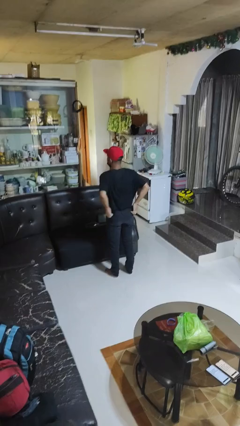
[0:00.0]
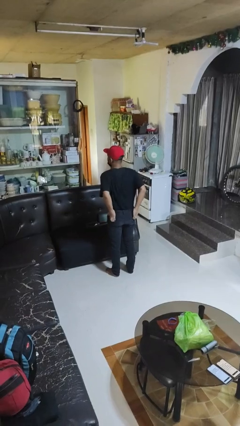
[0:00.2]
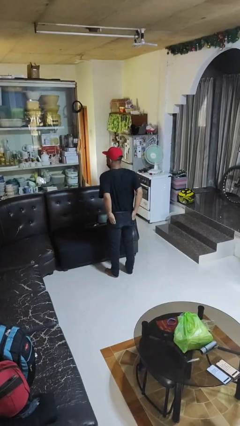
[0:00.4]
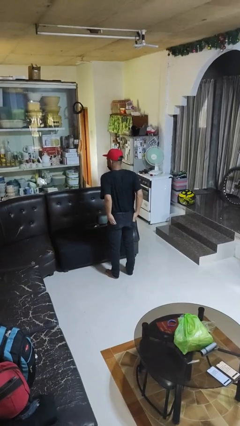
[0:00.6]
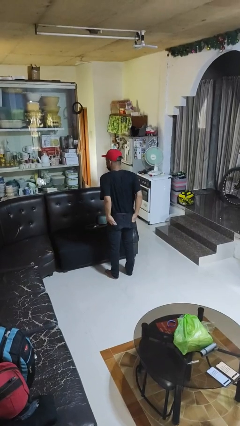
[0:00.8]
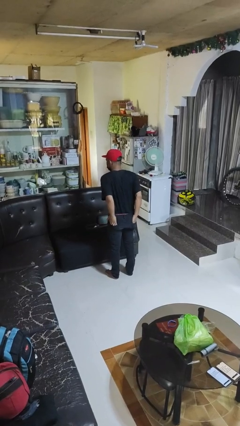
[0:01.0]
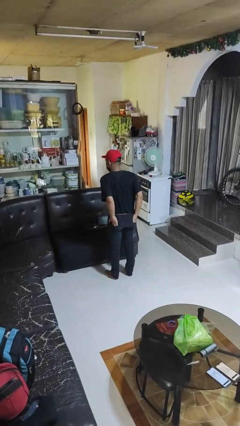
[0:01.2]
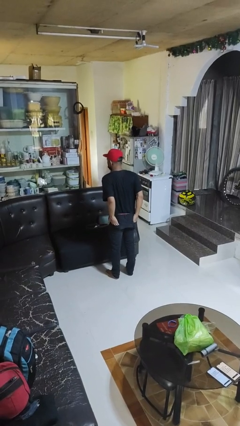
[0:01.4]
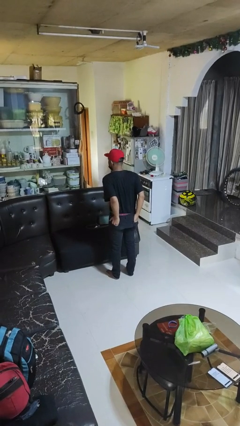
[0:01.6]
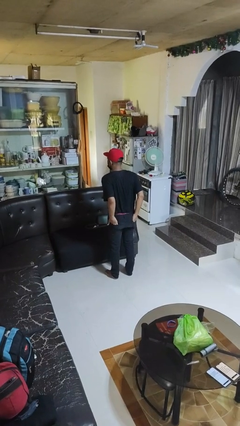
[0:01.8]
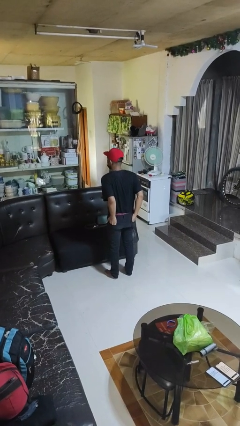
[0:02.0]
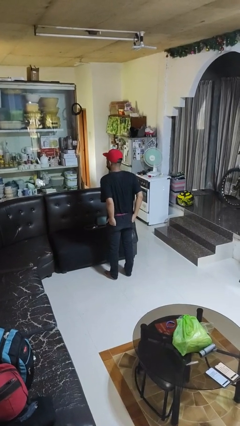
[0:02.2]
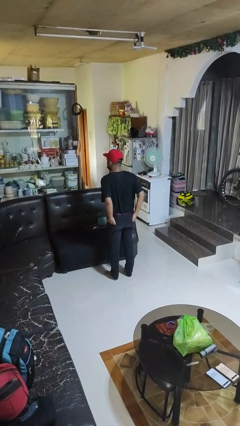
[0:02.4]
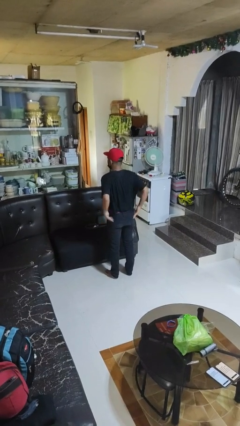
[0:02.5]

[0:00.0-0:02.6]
person puts hands in back pockets

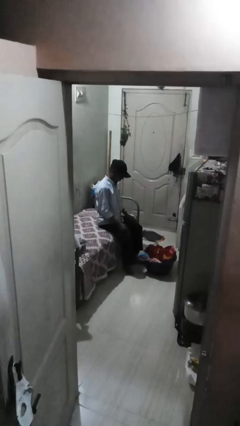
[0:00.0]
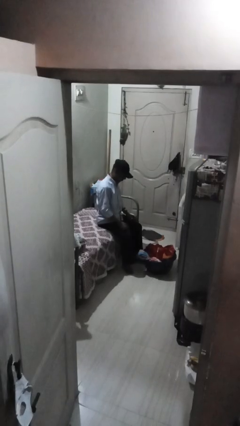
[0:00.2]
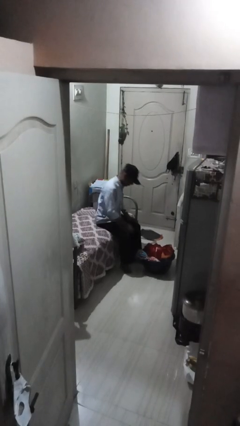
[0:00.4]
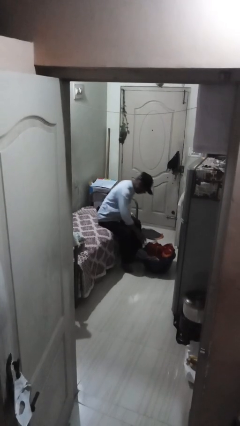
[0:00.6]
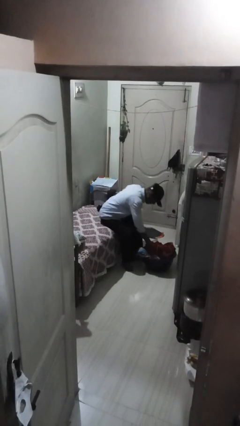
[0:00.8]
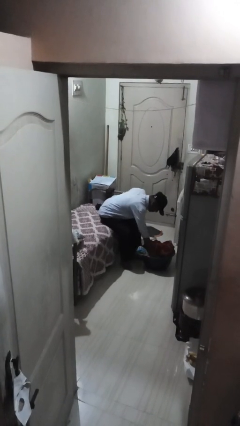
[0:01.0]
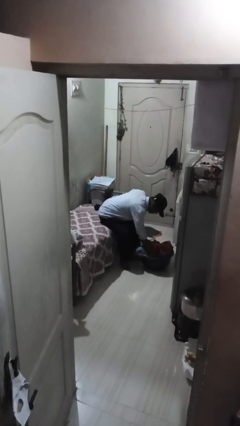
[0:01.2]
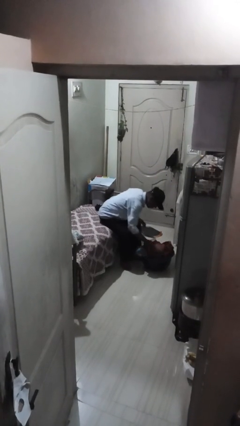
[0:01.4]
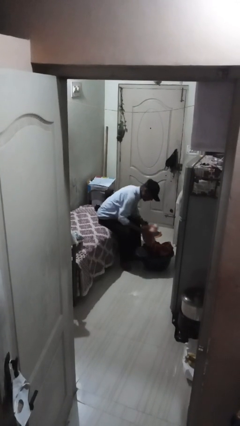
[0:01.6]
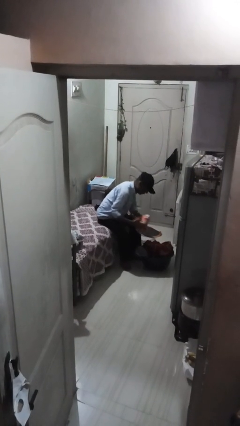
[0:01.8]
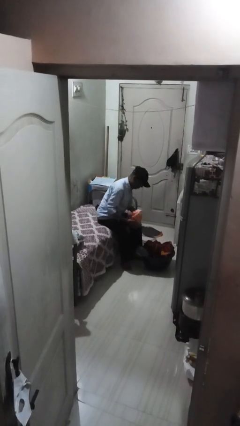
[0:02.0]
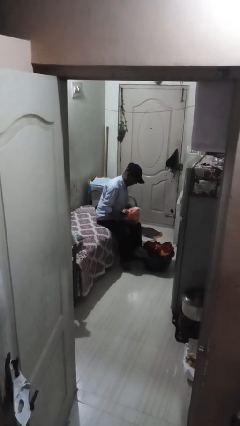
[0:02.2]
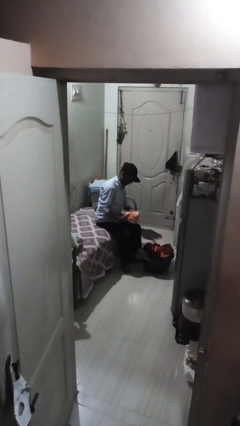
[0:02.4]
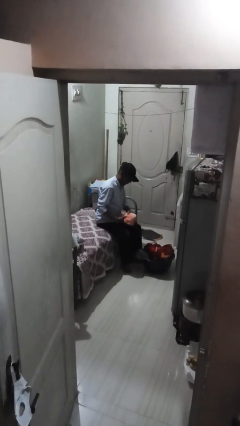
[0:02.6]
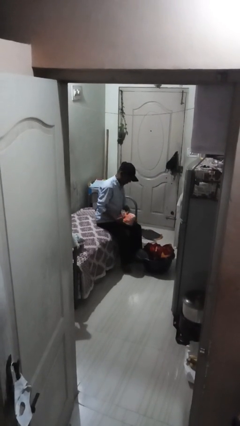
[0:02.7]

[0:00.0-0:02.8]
person takes object from basket

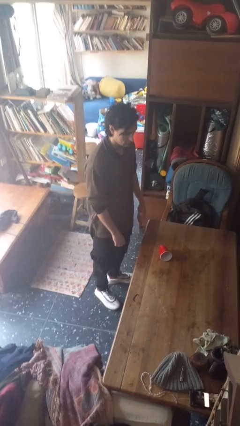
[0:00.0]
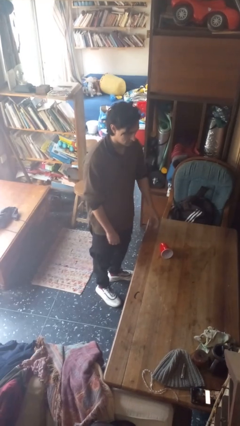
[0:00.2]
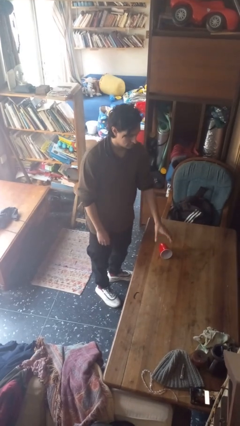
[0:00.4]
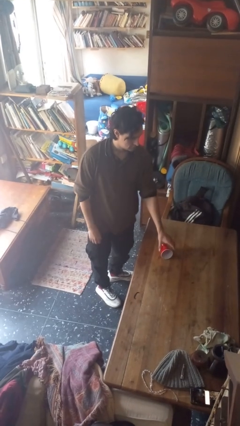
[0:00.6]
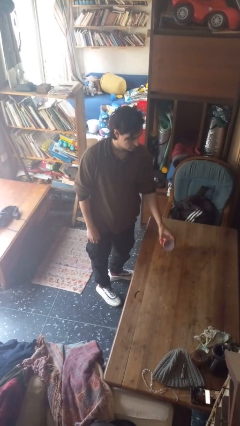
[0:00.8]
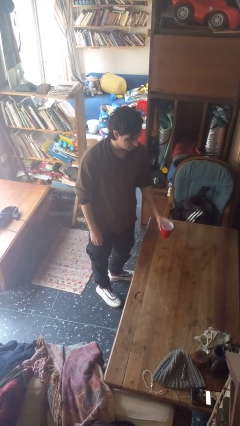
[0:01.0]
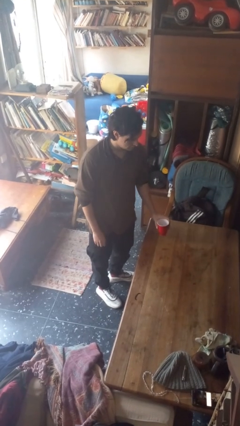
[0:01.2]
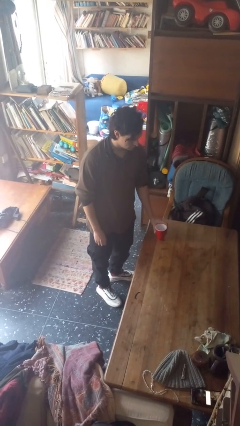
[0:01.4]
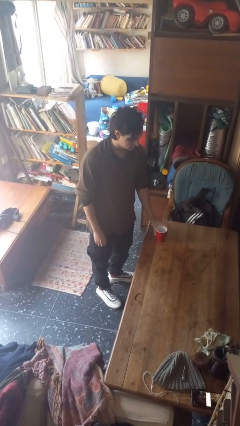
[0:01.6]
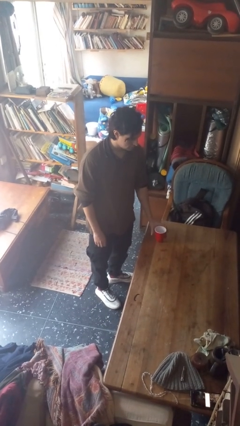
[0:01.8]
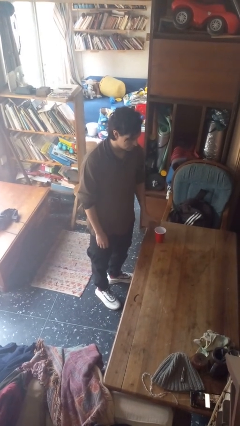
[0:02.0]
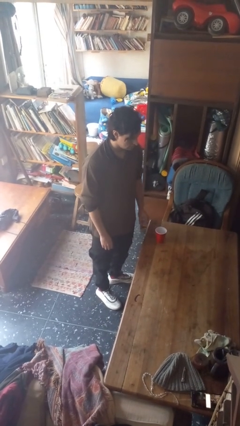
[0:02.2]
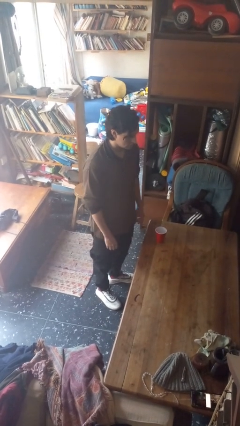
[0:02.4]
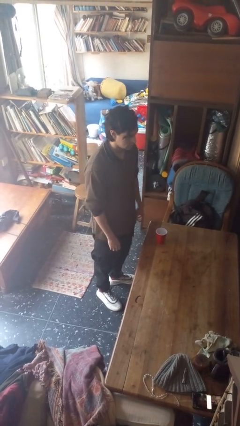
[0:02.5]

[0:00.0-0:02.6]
person sets upright glass

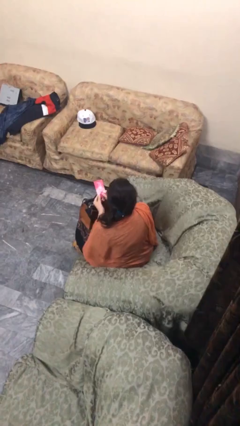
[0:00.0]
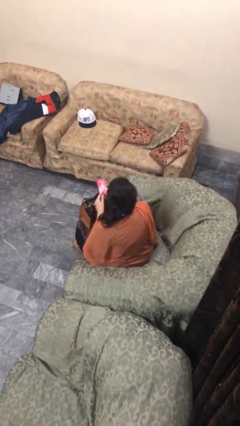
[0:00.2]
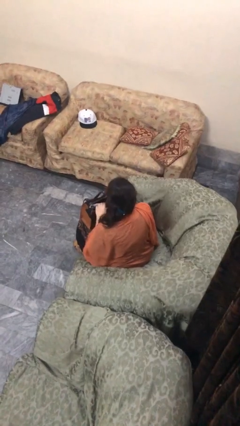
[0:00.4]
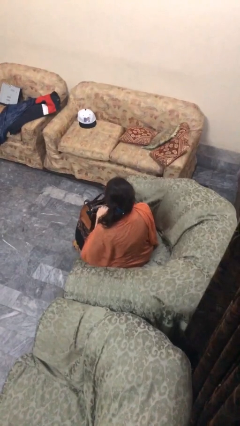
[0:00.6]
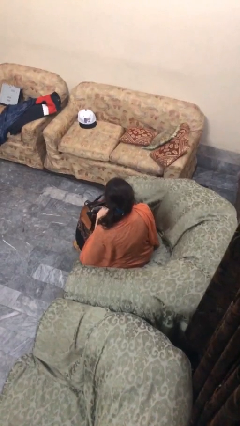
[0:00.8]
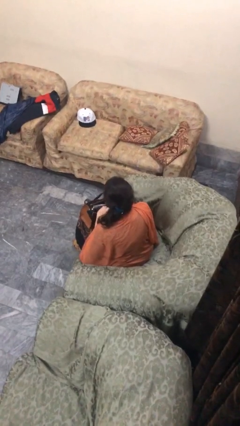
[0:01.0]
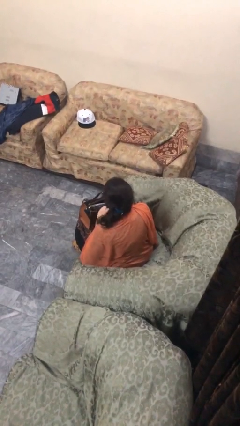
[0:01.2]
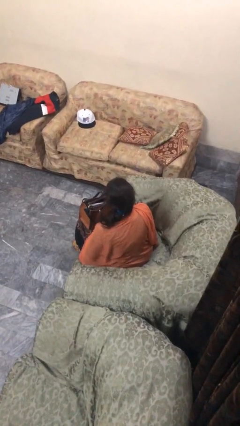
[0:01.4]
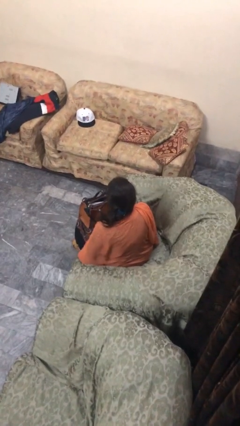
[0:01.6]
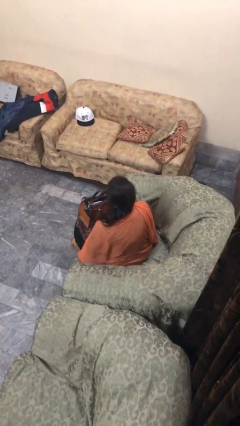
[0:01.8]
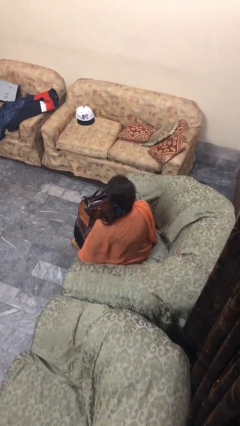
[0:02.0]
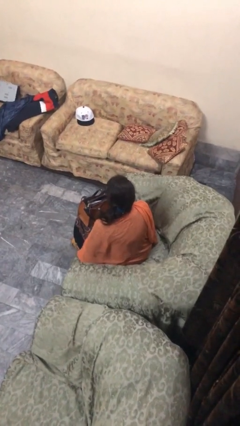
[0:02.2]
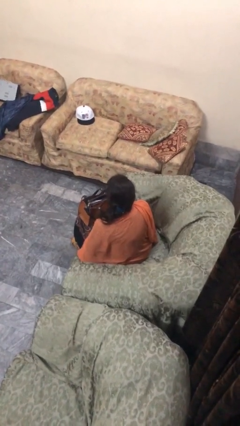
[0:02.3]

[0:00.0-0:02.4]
person puts object into purse

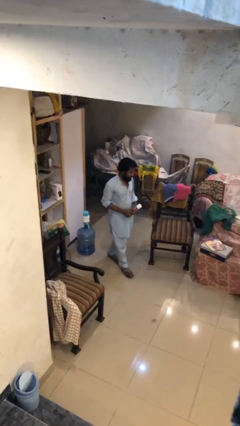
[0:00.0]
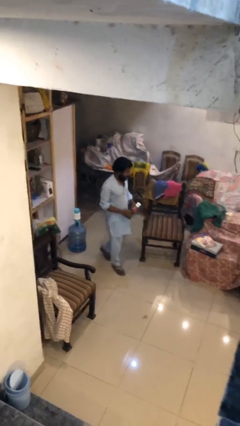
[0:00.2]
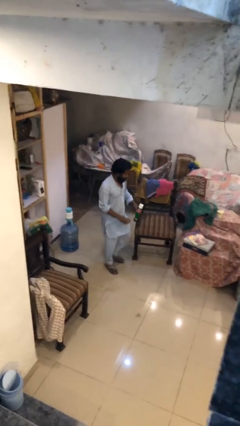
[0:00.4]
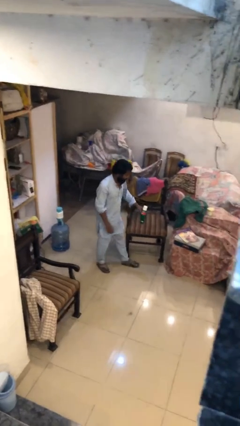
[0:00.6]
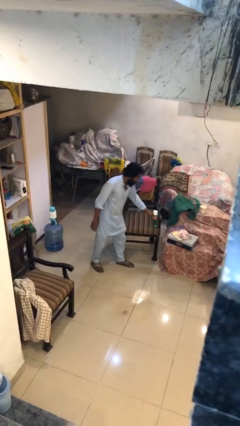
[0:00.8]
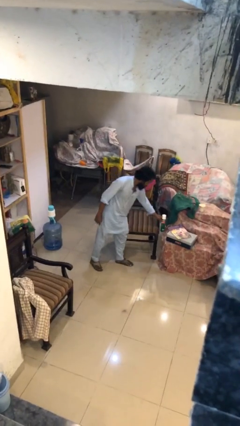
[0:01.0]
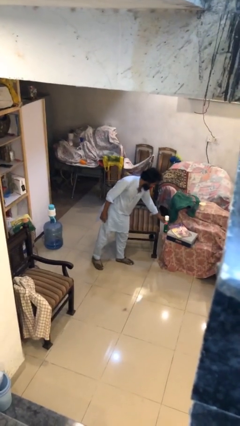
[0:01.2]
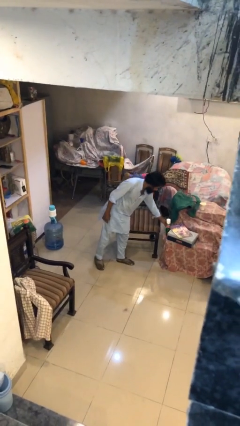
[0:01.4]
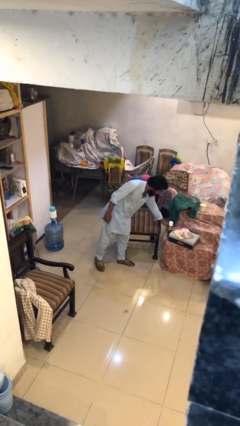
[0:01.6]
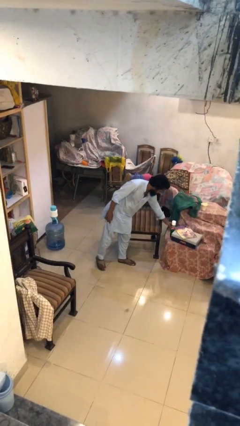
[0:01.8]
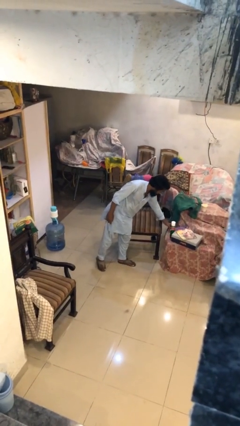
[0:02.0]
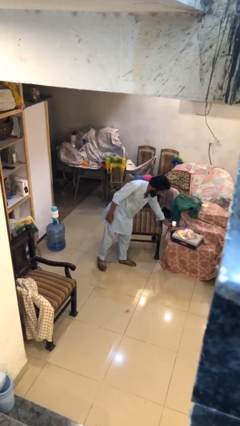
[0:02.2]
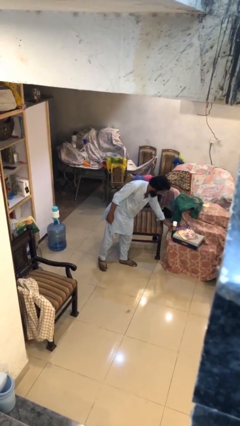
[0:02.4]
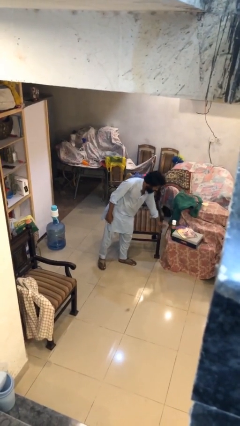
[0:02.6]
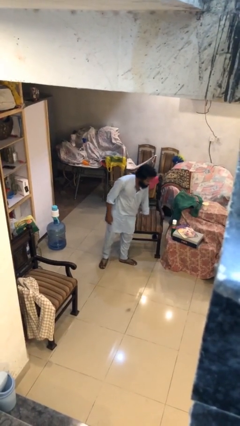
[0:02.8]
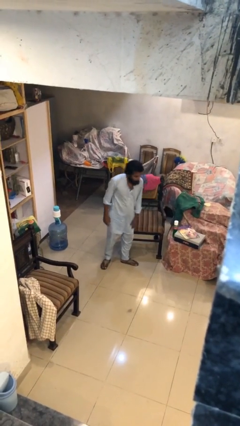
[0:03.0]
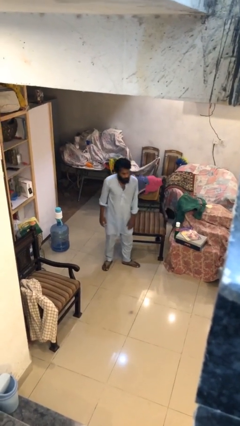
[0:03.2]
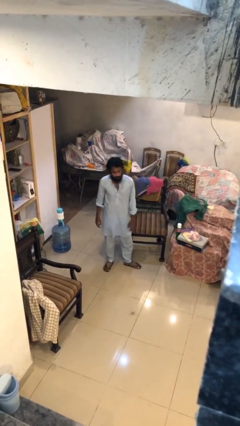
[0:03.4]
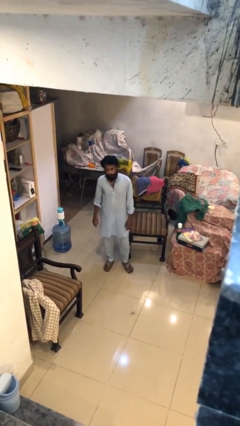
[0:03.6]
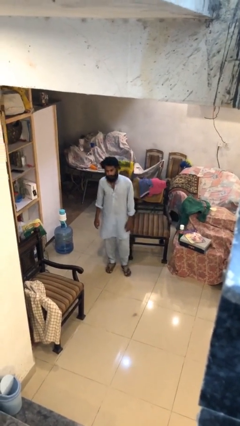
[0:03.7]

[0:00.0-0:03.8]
person puts down object on table

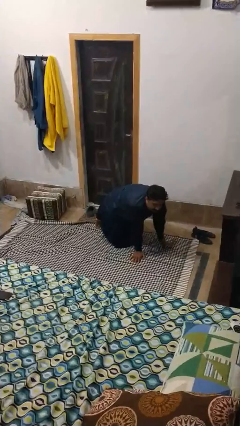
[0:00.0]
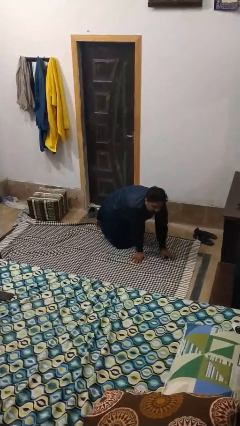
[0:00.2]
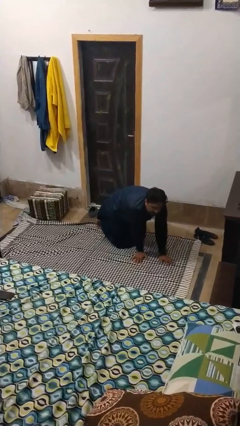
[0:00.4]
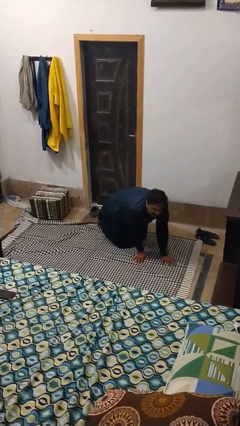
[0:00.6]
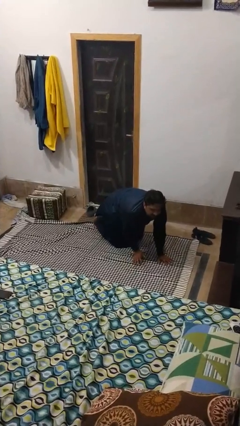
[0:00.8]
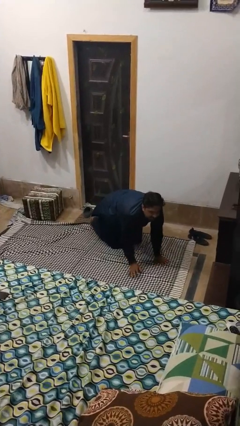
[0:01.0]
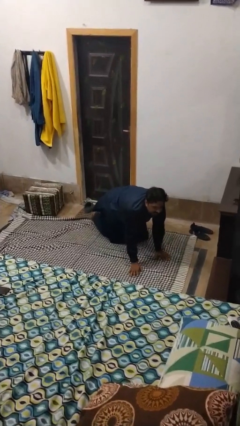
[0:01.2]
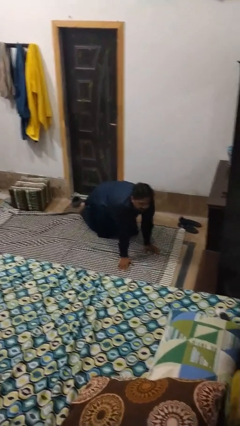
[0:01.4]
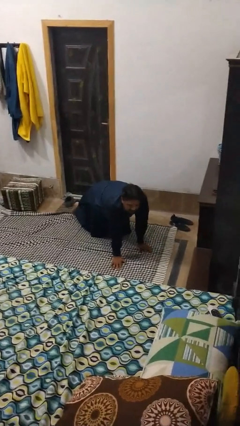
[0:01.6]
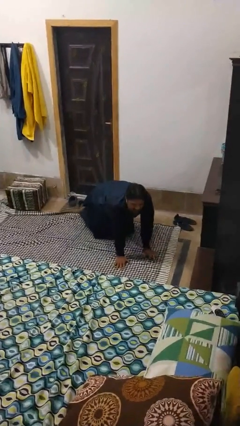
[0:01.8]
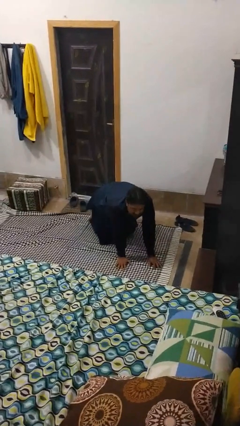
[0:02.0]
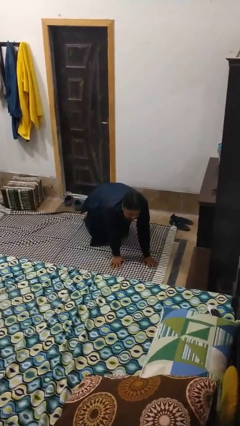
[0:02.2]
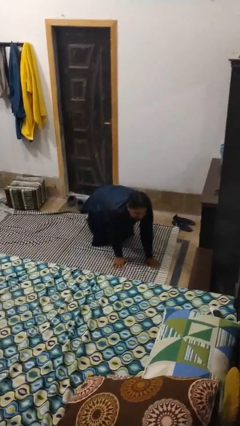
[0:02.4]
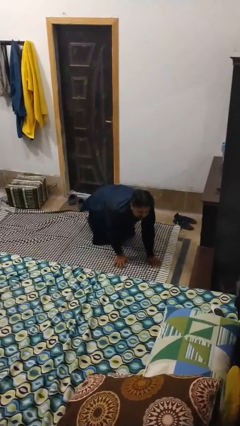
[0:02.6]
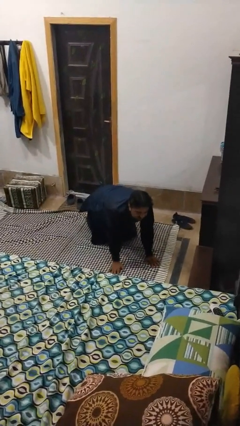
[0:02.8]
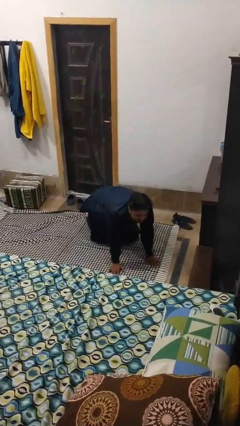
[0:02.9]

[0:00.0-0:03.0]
person crawls

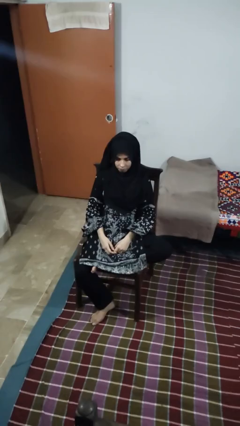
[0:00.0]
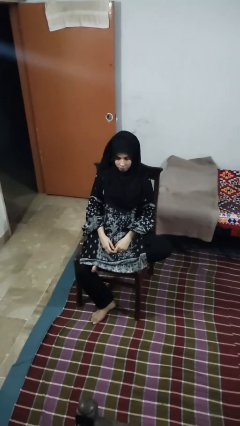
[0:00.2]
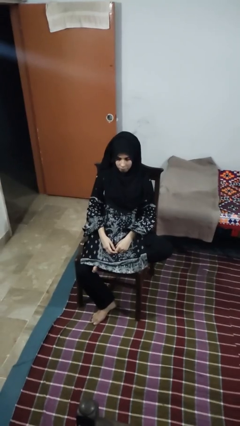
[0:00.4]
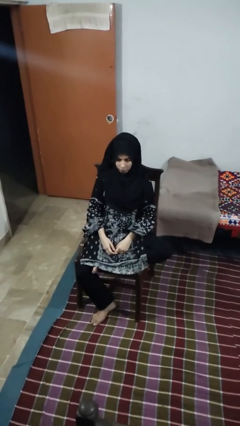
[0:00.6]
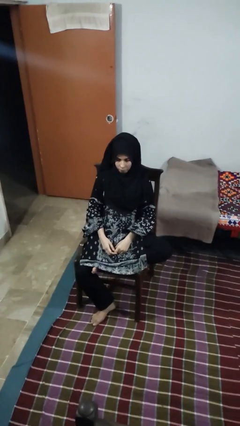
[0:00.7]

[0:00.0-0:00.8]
person swats bug
